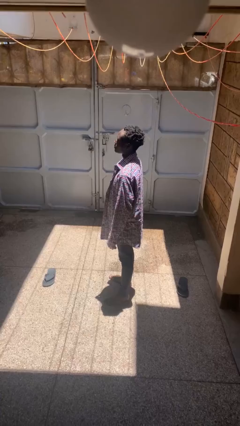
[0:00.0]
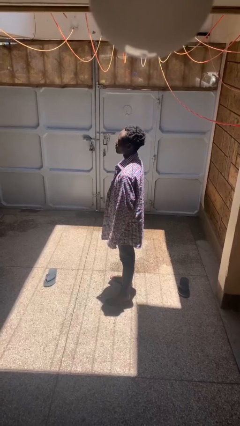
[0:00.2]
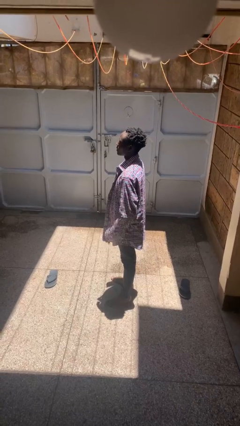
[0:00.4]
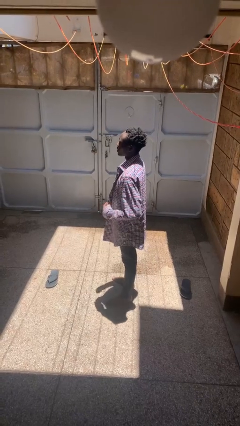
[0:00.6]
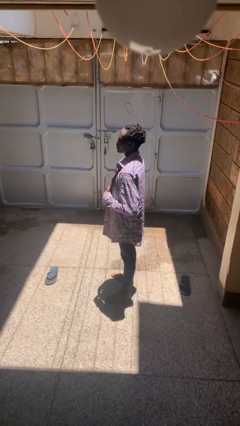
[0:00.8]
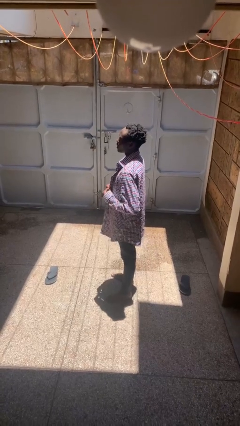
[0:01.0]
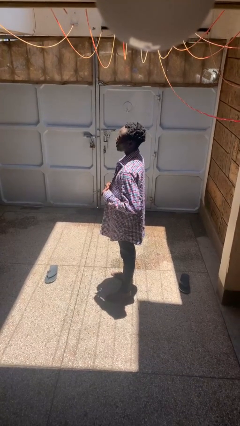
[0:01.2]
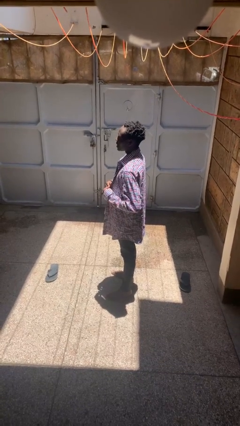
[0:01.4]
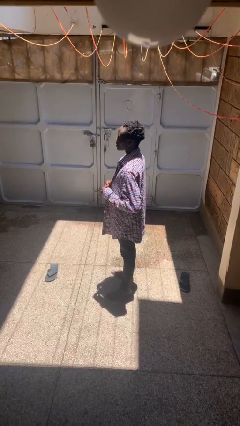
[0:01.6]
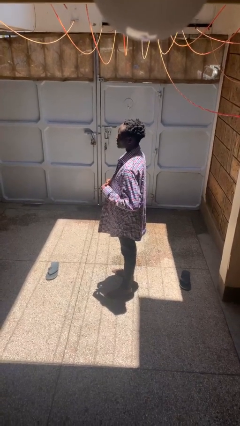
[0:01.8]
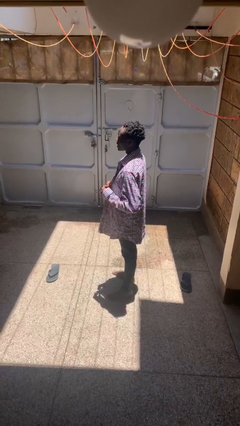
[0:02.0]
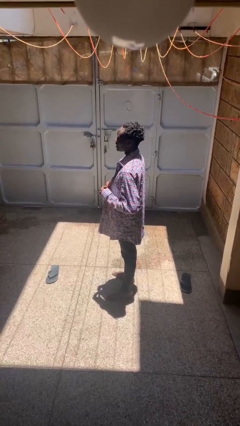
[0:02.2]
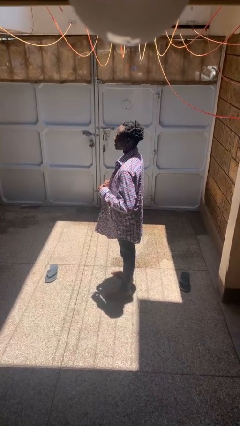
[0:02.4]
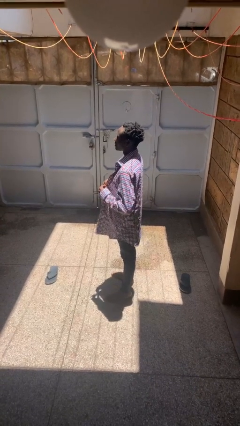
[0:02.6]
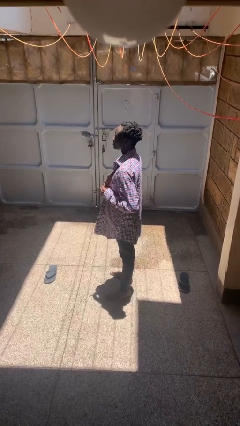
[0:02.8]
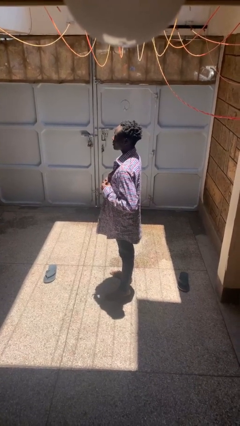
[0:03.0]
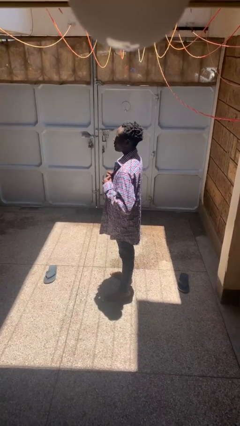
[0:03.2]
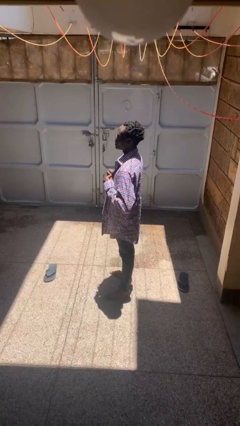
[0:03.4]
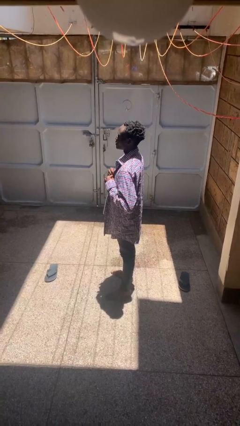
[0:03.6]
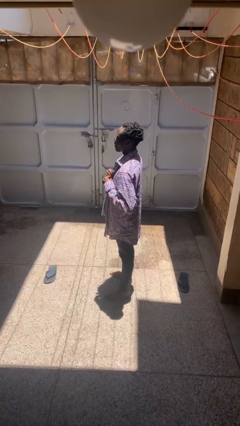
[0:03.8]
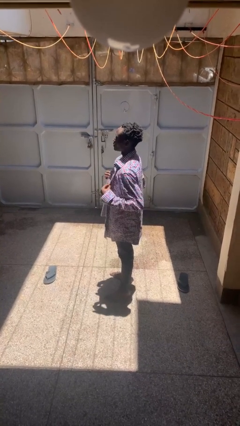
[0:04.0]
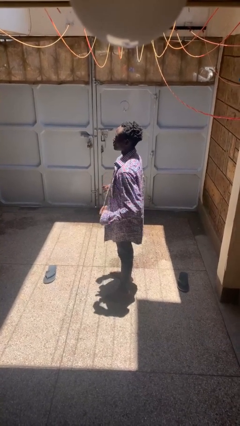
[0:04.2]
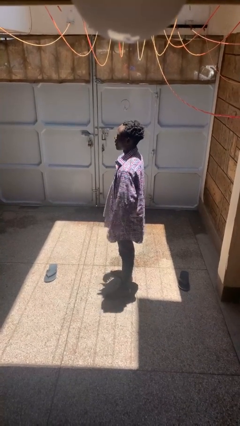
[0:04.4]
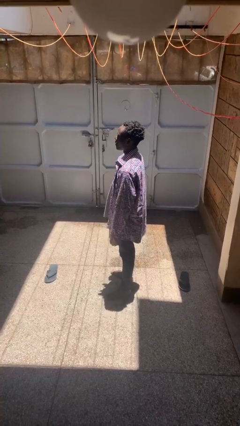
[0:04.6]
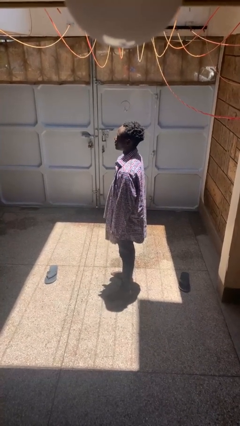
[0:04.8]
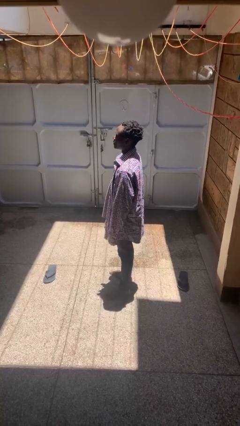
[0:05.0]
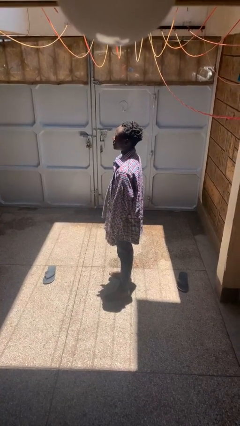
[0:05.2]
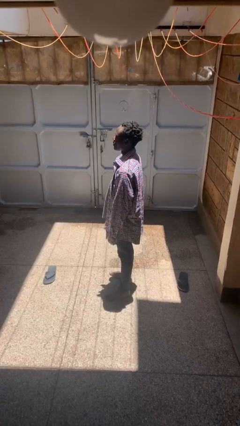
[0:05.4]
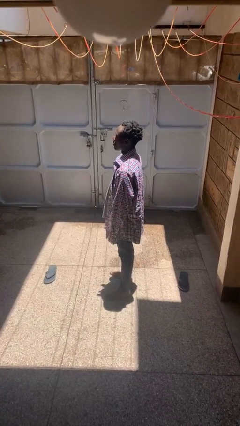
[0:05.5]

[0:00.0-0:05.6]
person unbuttons shirt

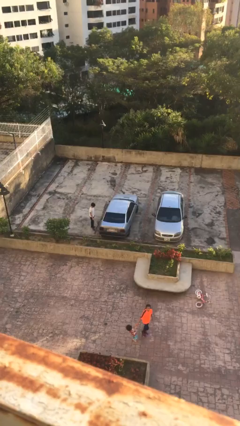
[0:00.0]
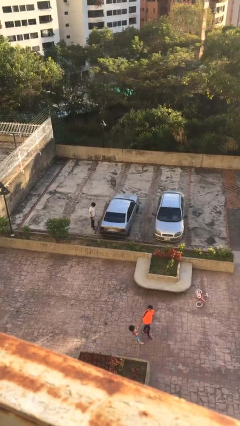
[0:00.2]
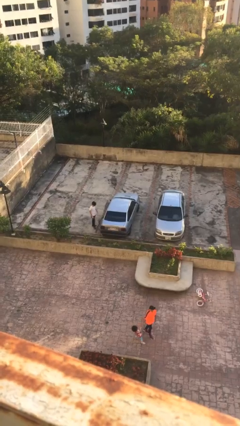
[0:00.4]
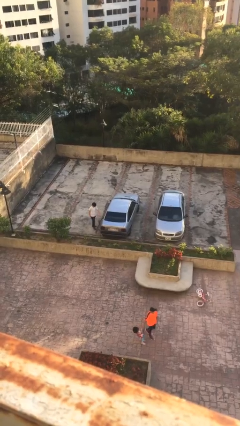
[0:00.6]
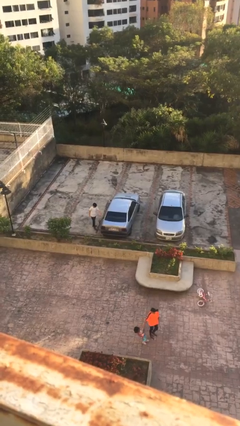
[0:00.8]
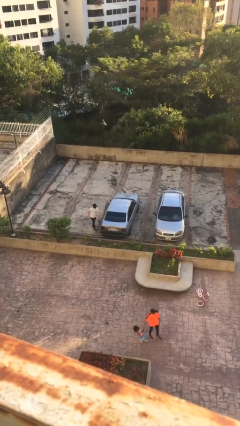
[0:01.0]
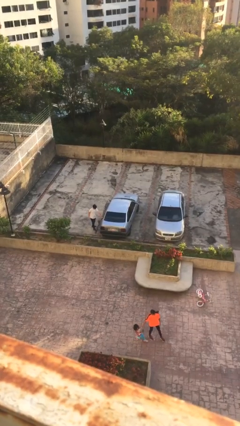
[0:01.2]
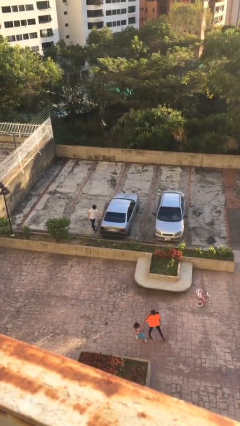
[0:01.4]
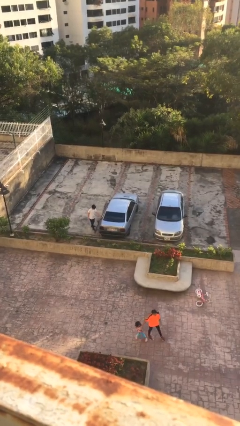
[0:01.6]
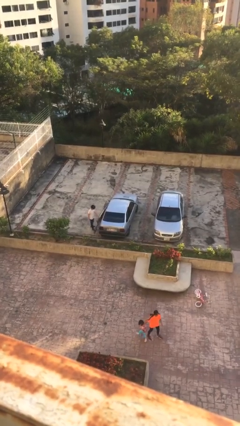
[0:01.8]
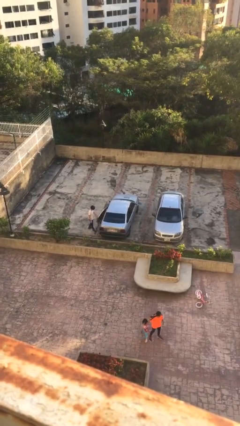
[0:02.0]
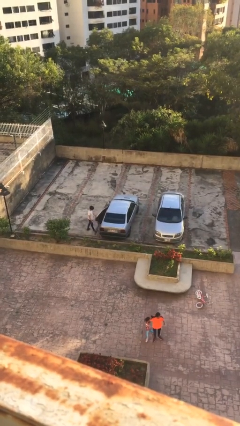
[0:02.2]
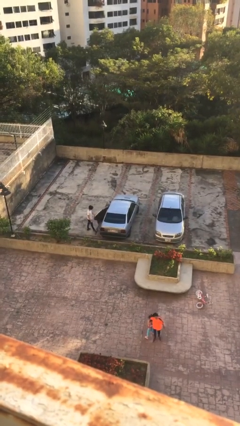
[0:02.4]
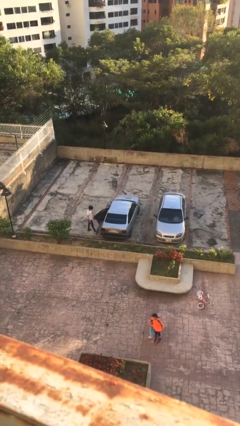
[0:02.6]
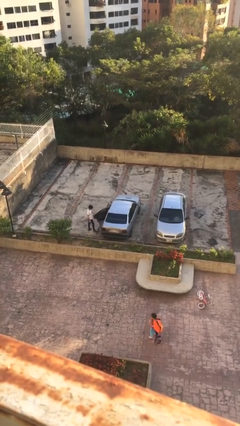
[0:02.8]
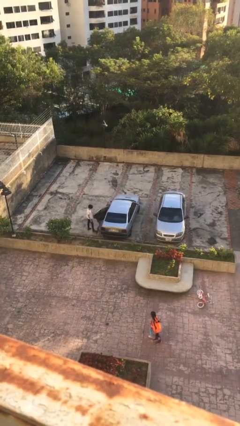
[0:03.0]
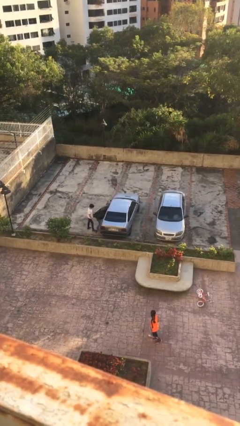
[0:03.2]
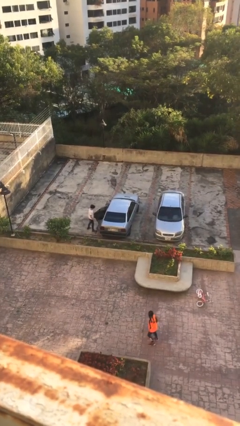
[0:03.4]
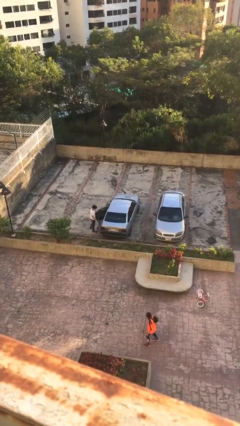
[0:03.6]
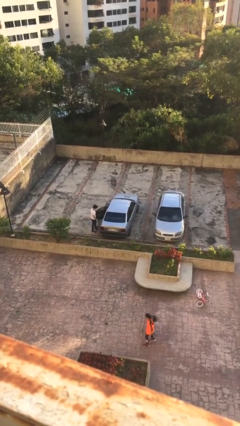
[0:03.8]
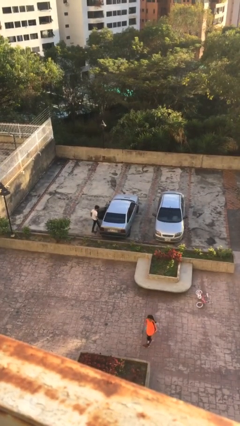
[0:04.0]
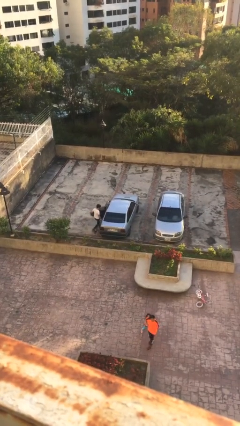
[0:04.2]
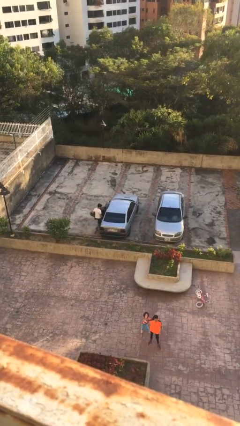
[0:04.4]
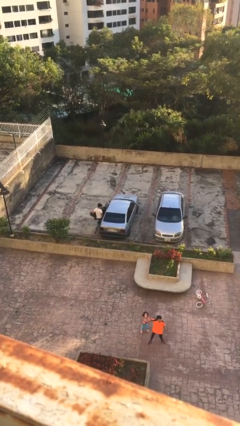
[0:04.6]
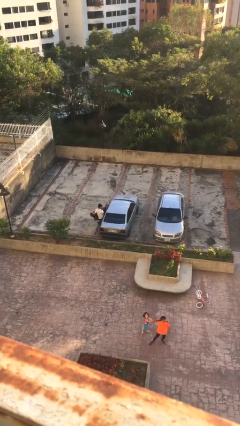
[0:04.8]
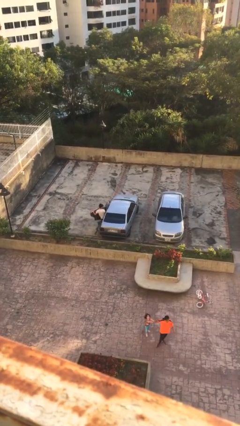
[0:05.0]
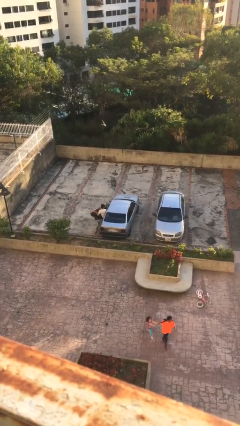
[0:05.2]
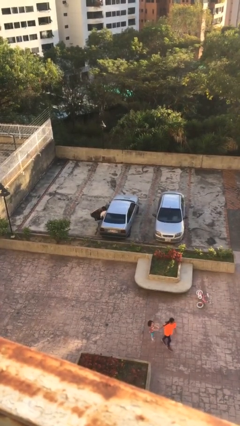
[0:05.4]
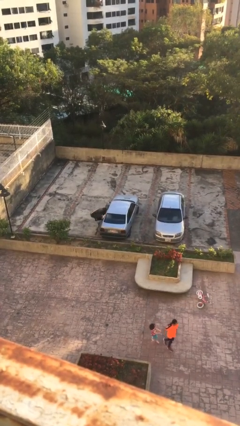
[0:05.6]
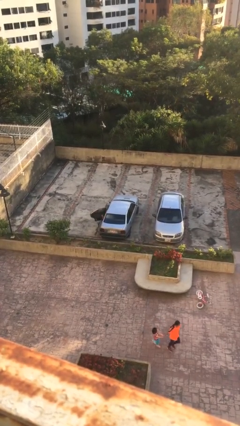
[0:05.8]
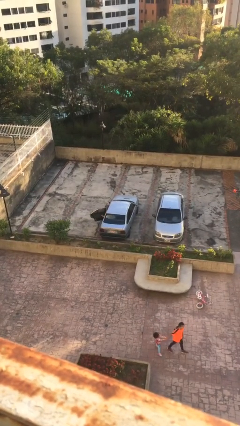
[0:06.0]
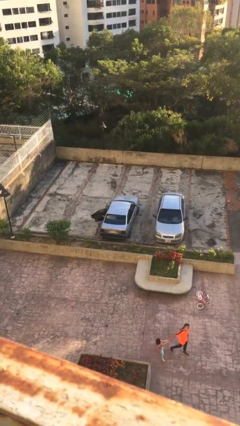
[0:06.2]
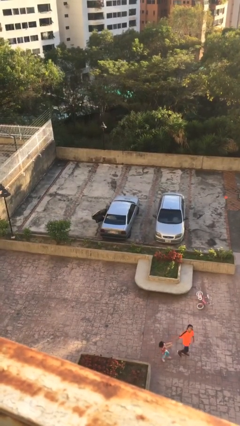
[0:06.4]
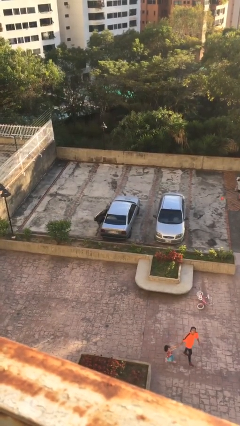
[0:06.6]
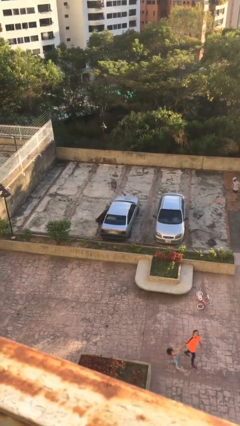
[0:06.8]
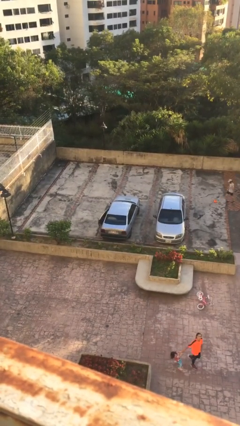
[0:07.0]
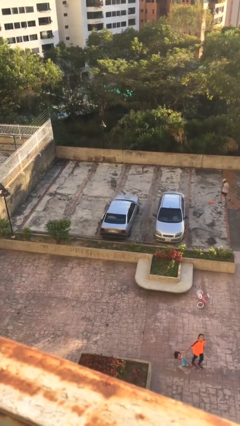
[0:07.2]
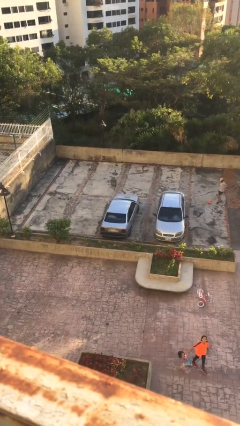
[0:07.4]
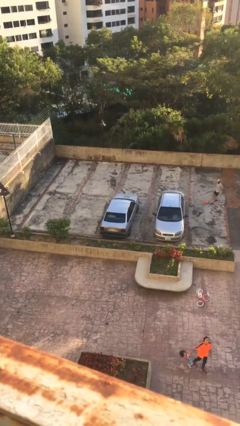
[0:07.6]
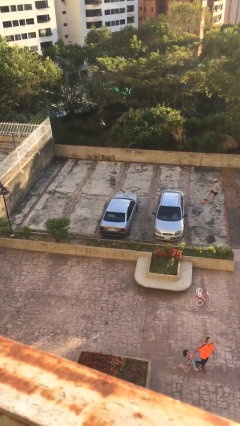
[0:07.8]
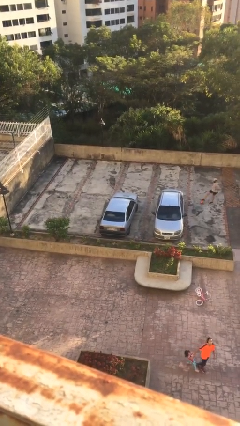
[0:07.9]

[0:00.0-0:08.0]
car picks up person

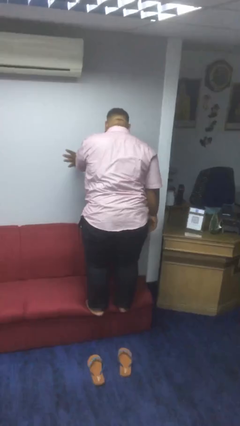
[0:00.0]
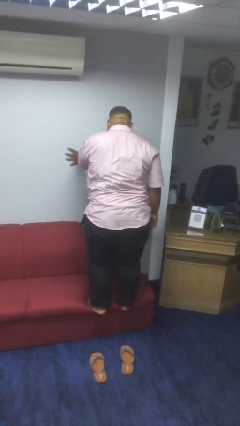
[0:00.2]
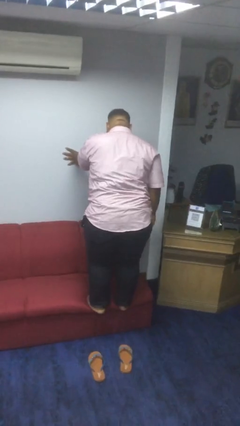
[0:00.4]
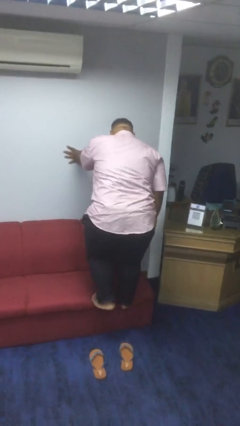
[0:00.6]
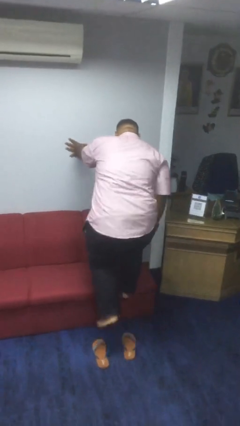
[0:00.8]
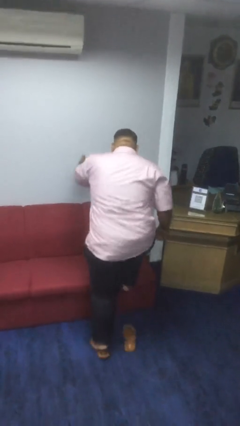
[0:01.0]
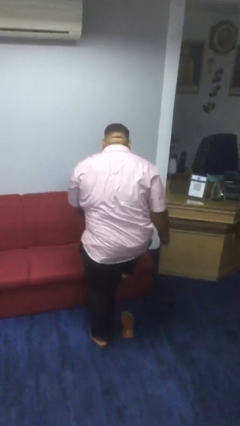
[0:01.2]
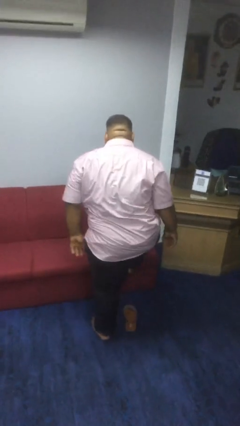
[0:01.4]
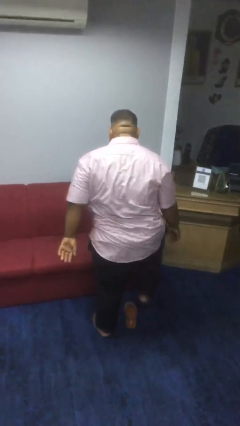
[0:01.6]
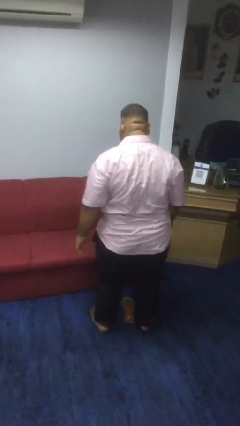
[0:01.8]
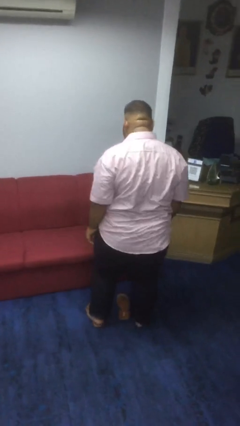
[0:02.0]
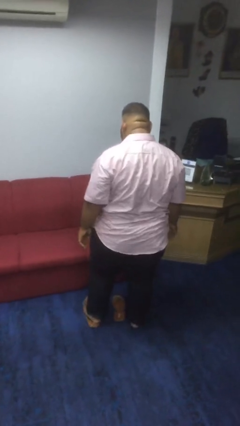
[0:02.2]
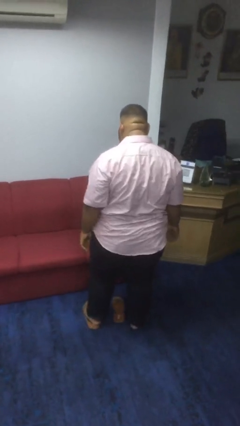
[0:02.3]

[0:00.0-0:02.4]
person climbs off couch

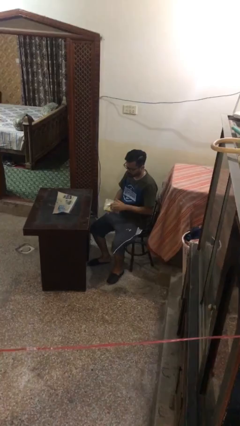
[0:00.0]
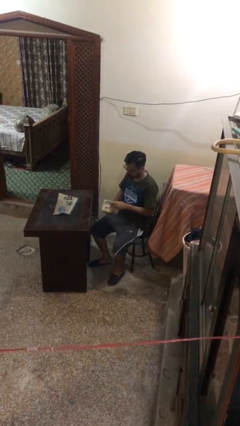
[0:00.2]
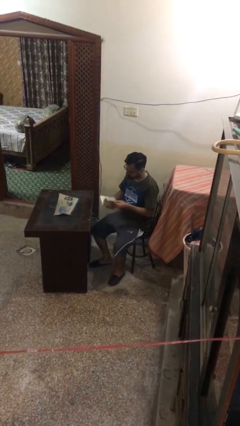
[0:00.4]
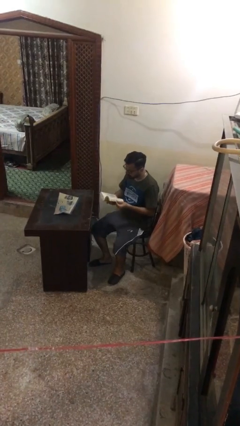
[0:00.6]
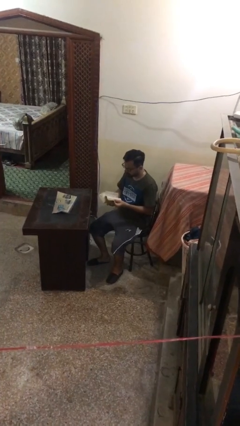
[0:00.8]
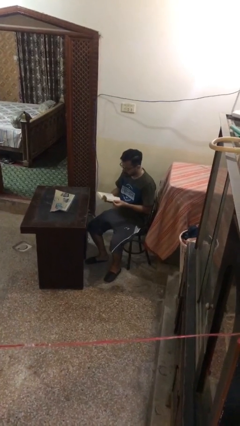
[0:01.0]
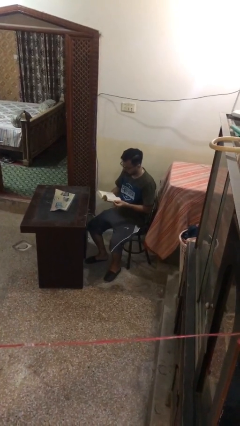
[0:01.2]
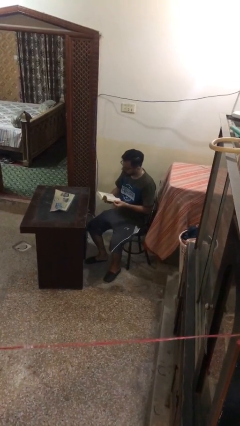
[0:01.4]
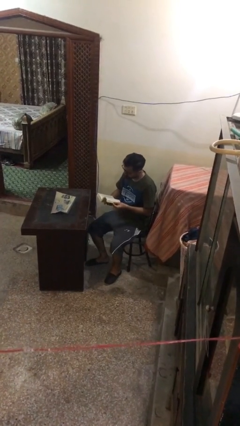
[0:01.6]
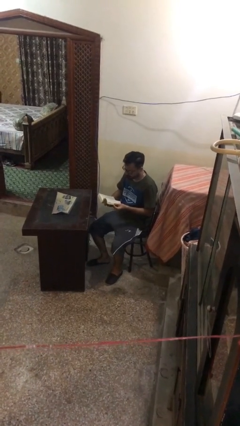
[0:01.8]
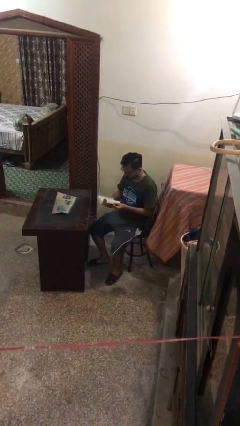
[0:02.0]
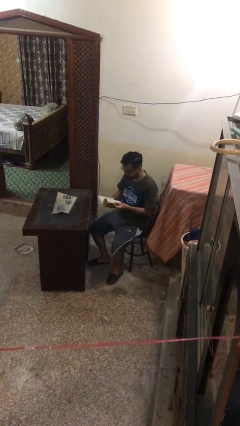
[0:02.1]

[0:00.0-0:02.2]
person reads document
